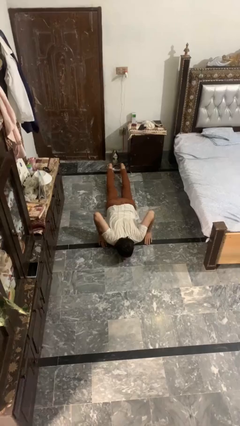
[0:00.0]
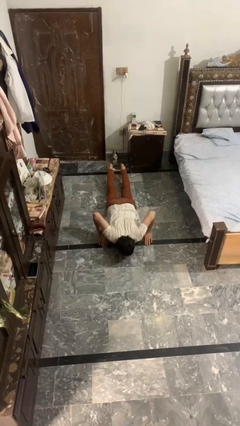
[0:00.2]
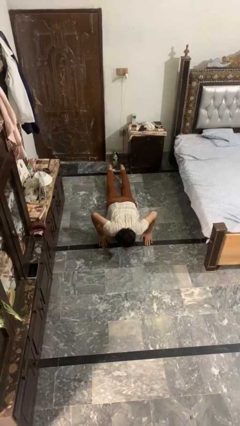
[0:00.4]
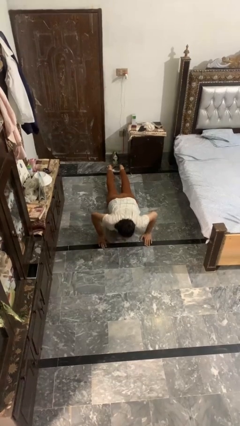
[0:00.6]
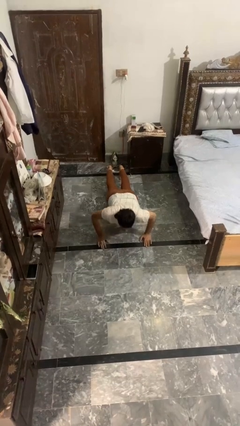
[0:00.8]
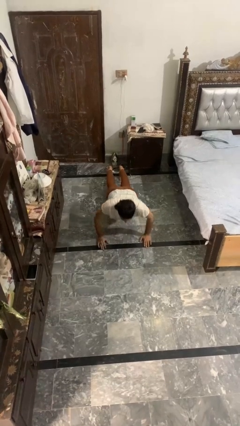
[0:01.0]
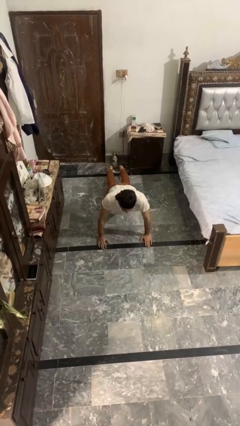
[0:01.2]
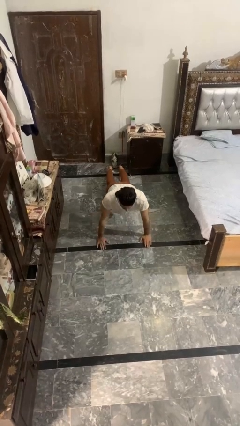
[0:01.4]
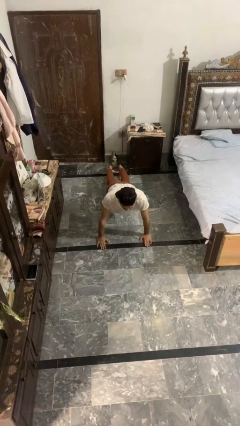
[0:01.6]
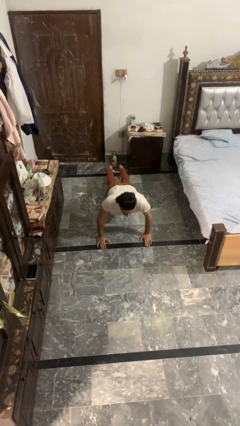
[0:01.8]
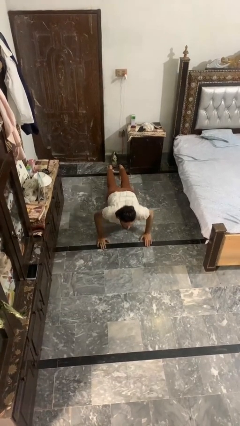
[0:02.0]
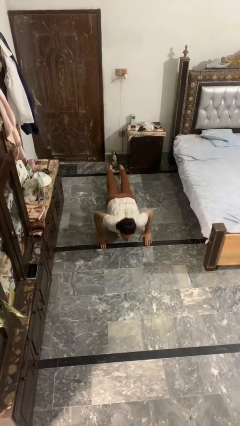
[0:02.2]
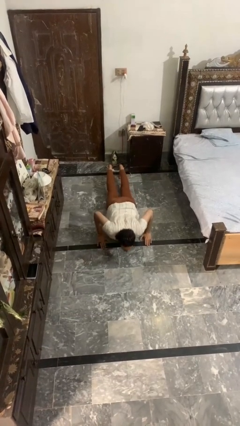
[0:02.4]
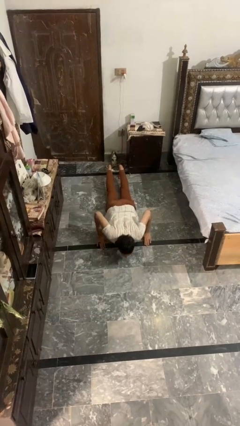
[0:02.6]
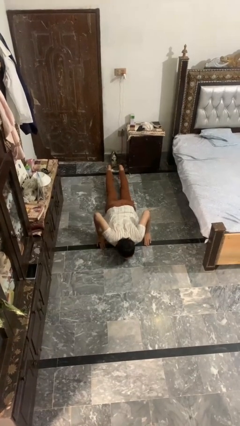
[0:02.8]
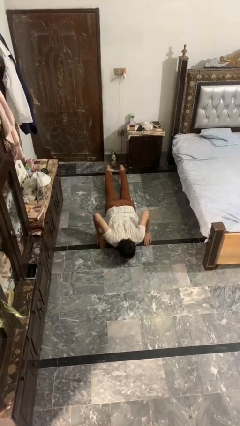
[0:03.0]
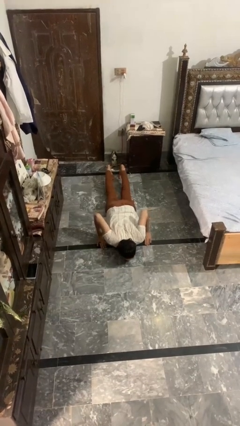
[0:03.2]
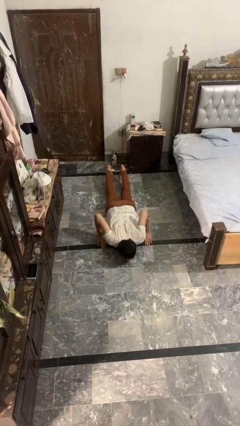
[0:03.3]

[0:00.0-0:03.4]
person exercises with pushup

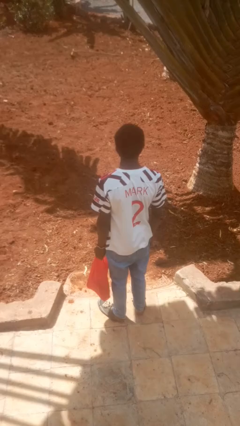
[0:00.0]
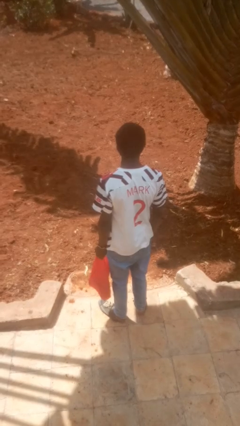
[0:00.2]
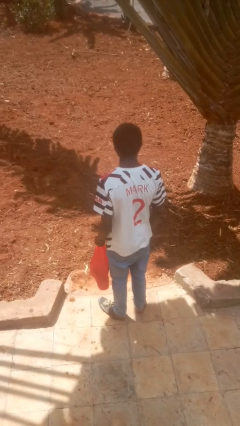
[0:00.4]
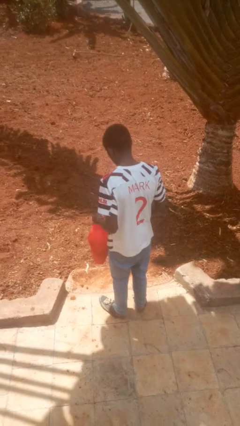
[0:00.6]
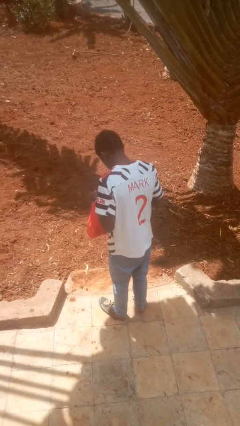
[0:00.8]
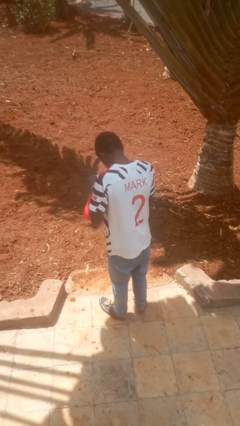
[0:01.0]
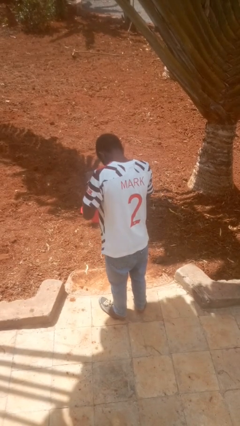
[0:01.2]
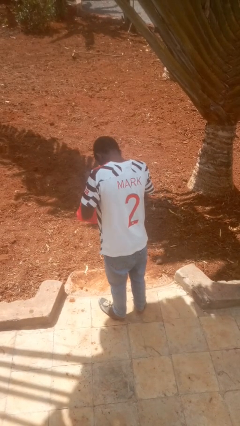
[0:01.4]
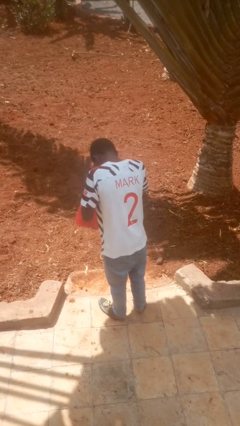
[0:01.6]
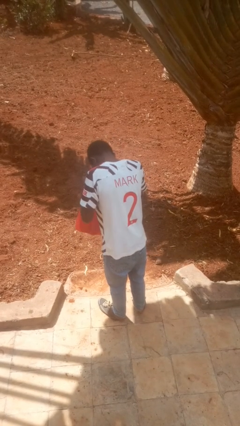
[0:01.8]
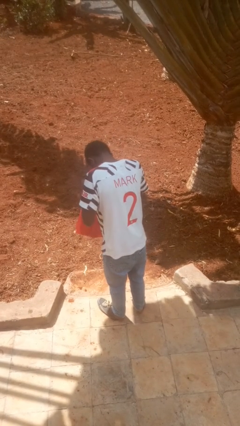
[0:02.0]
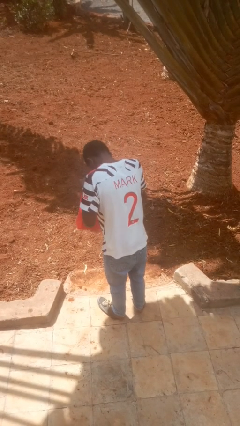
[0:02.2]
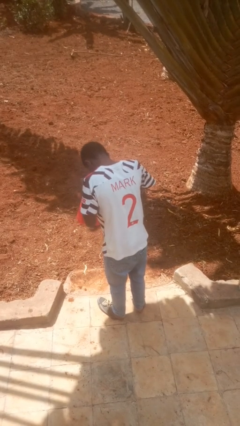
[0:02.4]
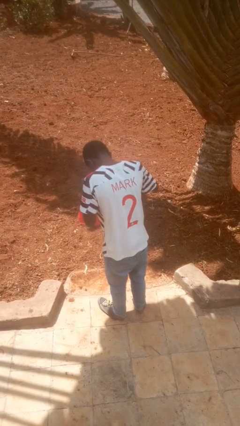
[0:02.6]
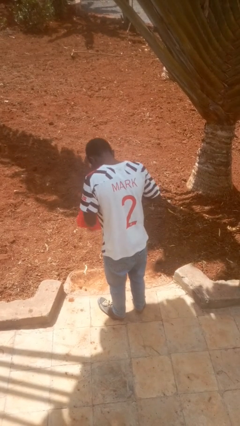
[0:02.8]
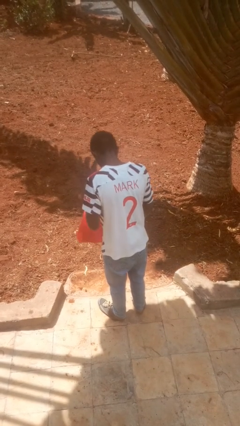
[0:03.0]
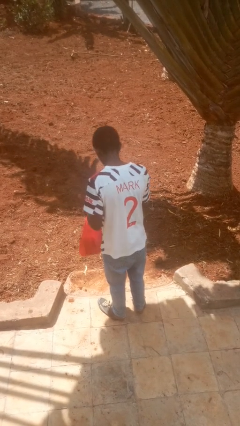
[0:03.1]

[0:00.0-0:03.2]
person searches in bag

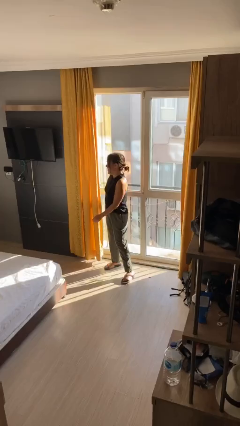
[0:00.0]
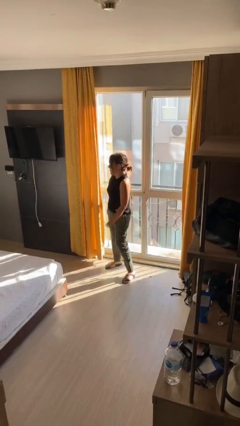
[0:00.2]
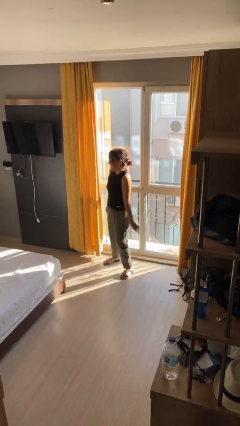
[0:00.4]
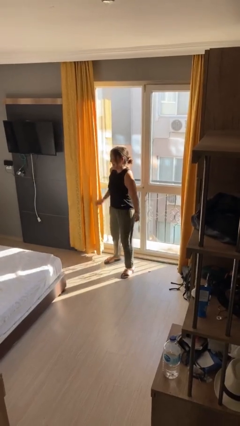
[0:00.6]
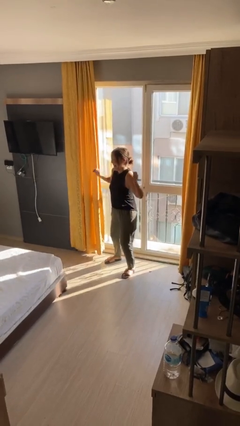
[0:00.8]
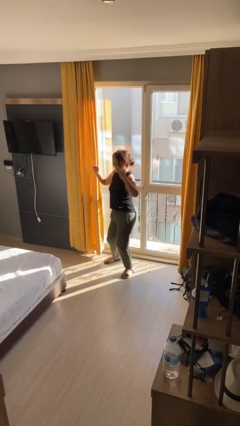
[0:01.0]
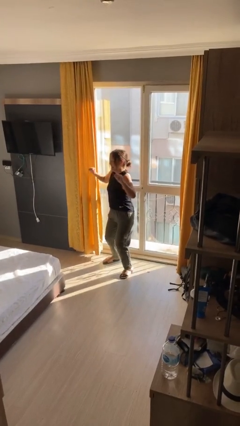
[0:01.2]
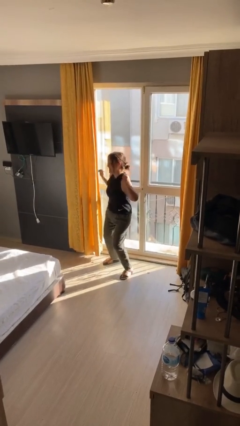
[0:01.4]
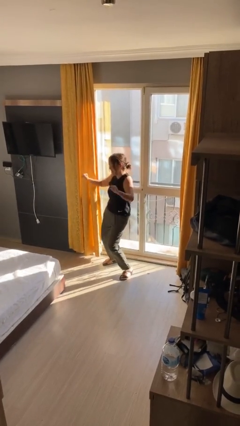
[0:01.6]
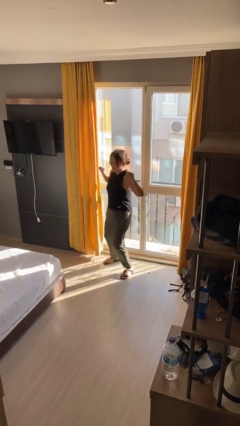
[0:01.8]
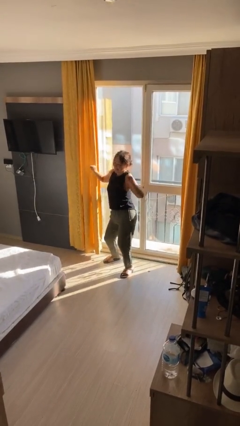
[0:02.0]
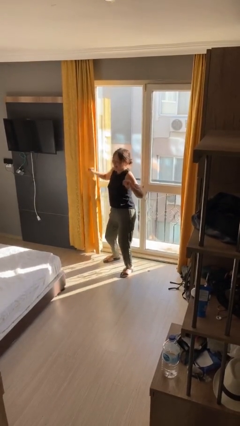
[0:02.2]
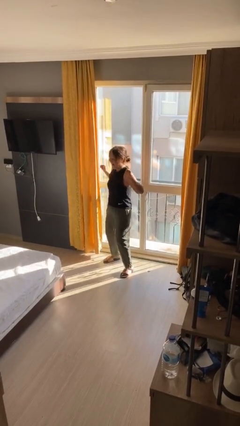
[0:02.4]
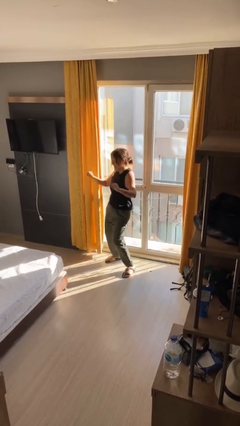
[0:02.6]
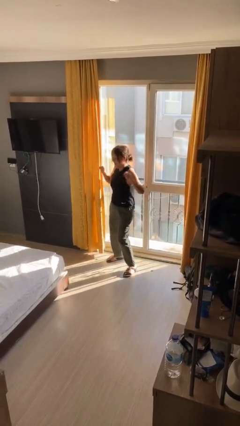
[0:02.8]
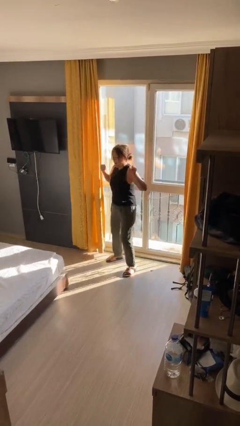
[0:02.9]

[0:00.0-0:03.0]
person dances in place

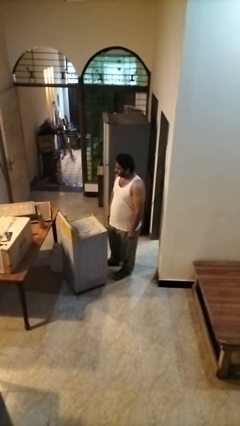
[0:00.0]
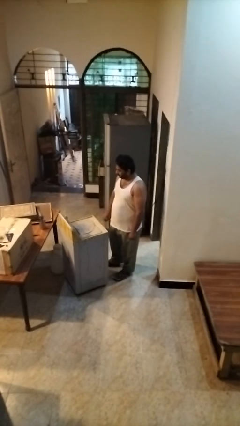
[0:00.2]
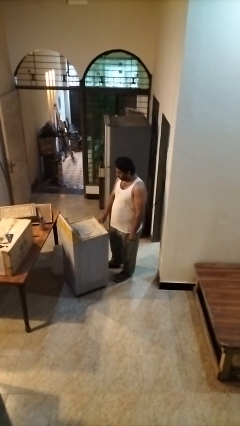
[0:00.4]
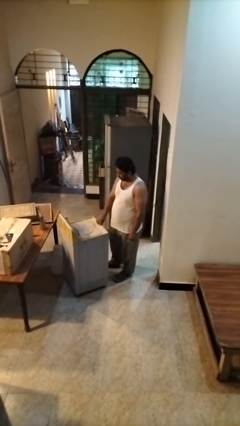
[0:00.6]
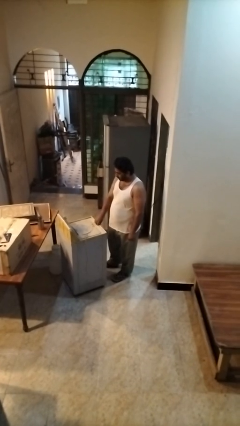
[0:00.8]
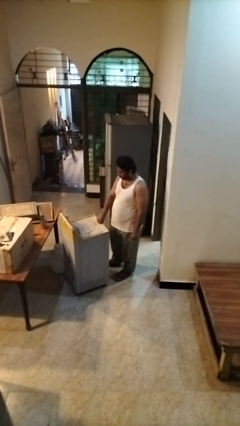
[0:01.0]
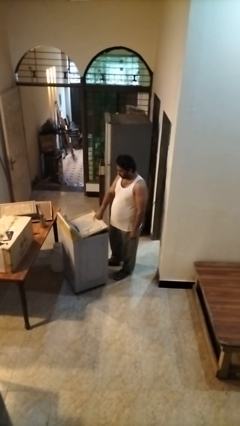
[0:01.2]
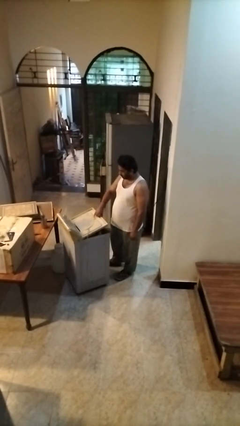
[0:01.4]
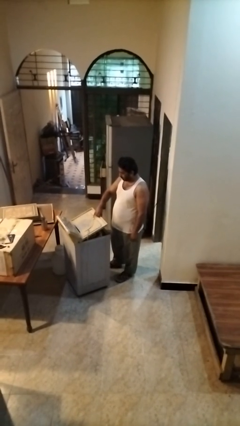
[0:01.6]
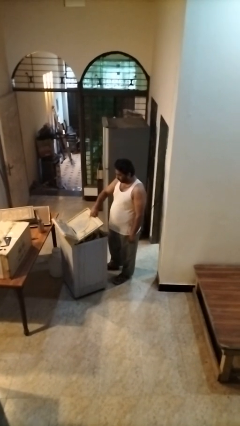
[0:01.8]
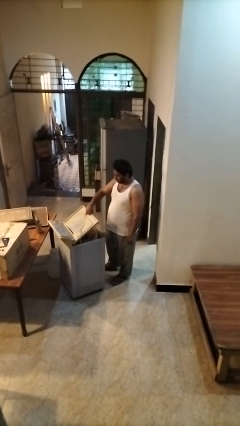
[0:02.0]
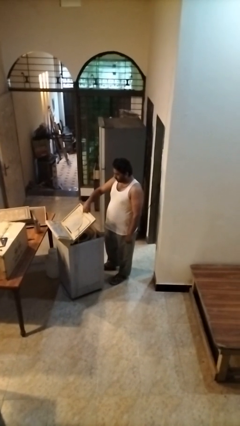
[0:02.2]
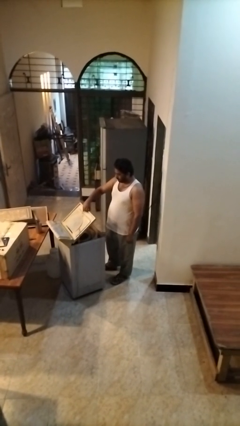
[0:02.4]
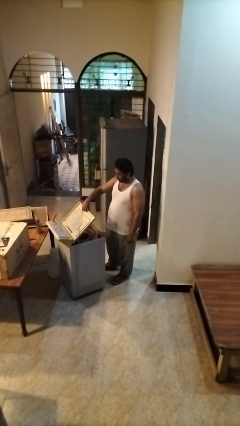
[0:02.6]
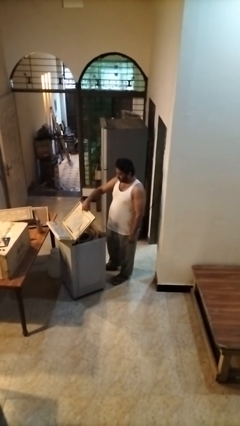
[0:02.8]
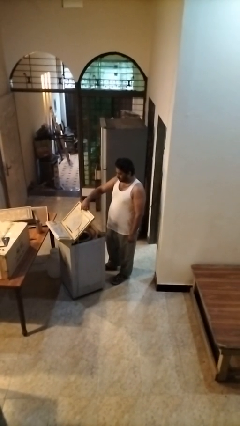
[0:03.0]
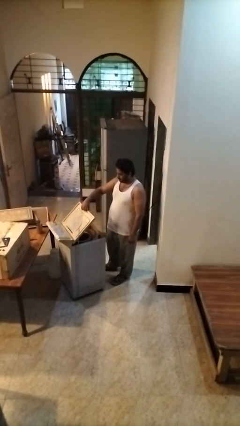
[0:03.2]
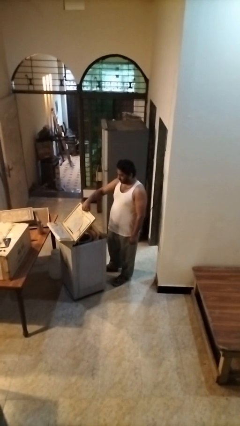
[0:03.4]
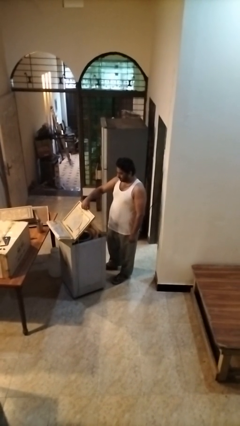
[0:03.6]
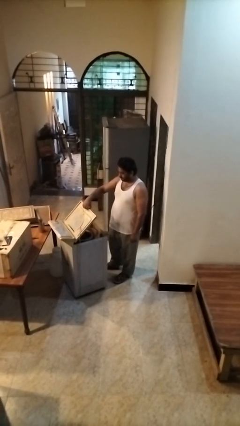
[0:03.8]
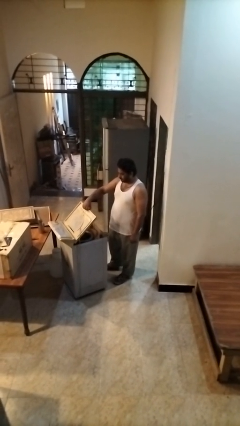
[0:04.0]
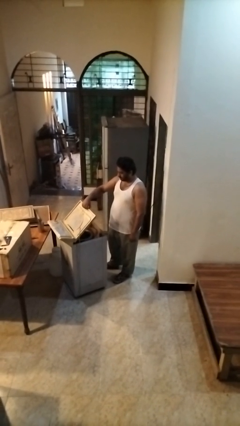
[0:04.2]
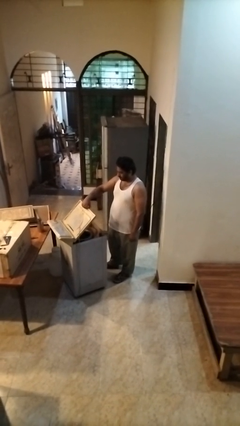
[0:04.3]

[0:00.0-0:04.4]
person opens clothes washer

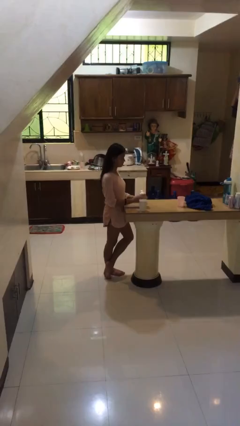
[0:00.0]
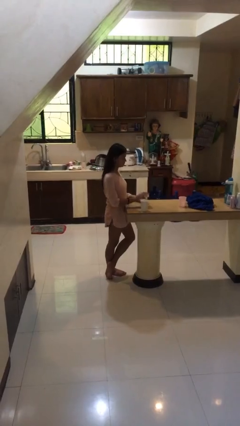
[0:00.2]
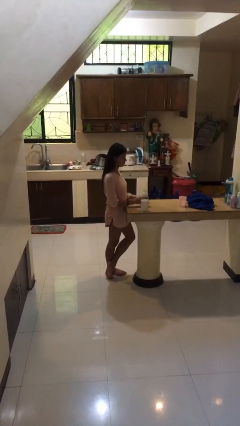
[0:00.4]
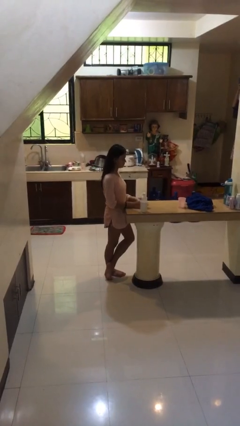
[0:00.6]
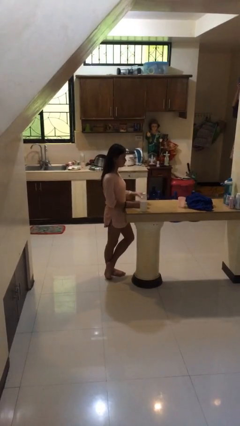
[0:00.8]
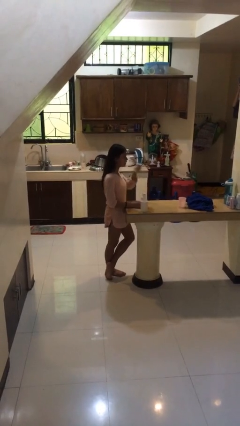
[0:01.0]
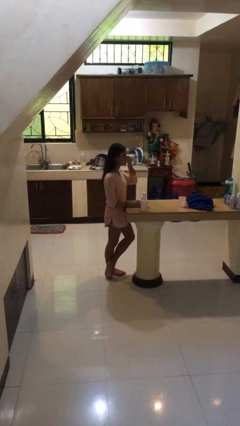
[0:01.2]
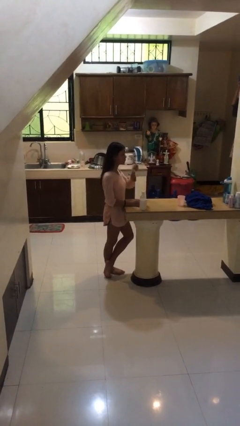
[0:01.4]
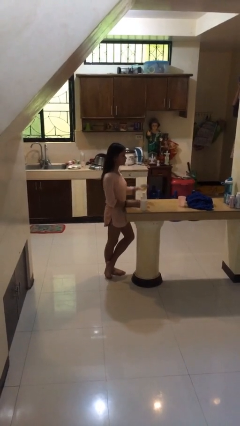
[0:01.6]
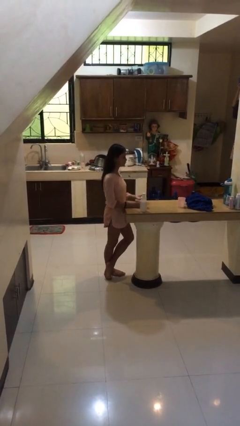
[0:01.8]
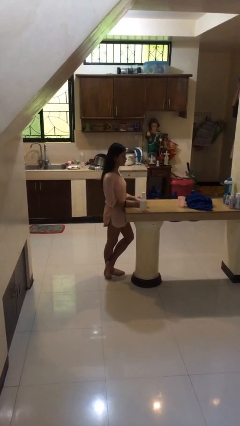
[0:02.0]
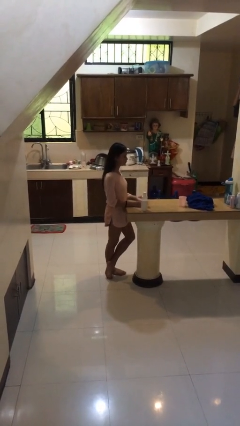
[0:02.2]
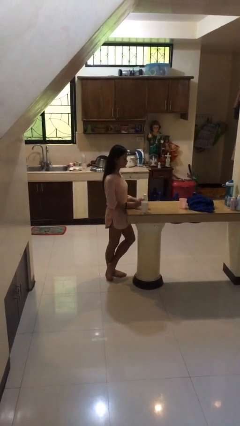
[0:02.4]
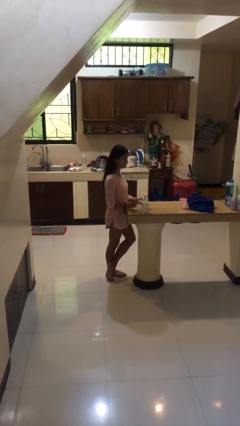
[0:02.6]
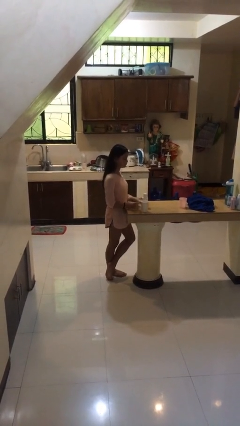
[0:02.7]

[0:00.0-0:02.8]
person takes medicine pills

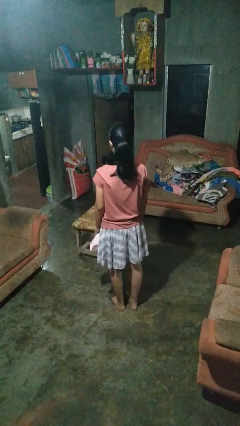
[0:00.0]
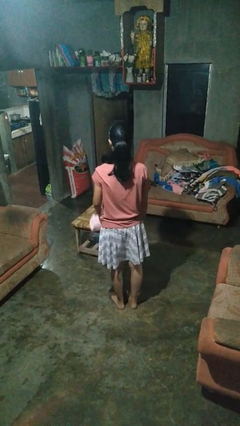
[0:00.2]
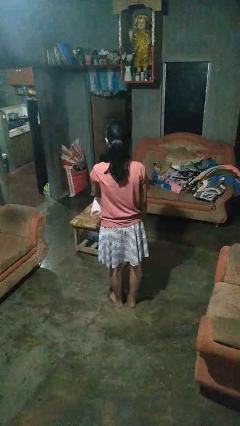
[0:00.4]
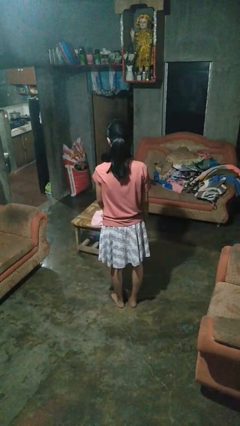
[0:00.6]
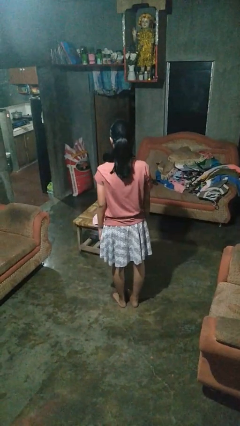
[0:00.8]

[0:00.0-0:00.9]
person throws object on table
